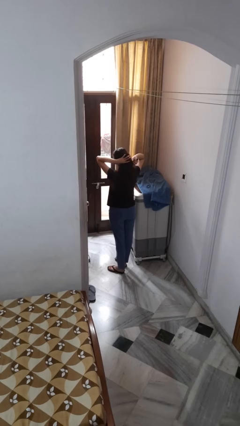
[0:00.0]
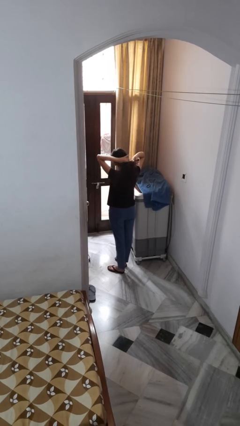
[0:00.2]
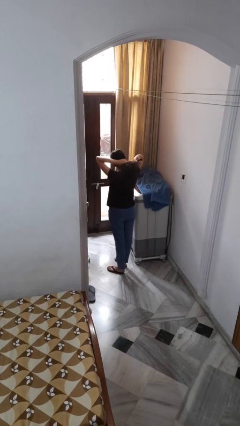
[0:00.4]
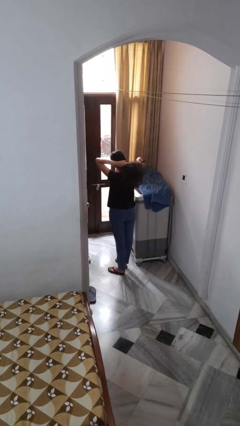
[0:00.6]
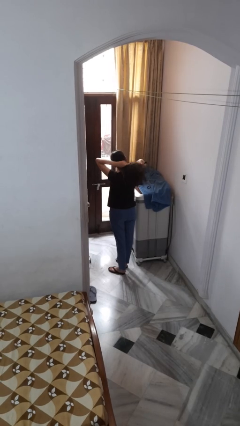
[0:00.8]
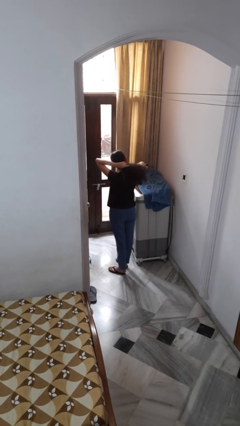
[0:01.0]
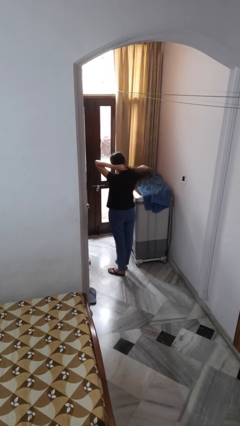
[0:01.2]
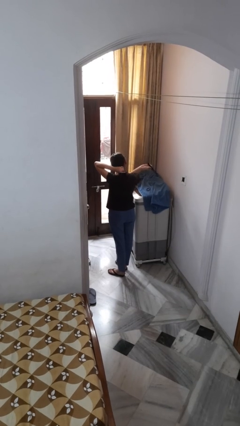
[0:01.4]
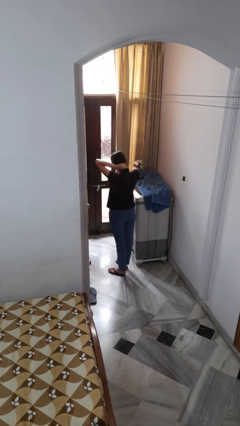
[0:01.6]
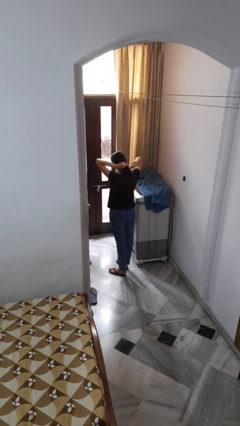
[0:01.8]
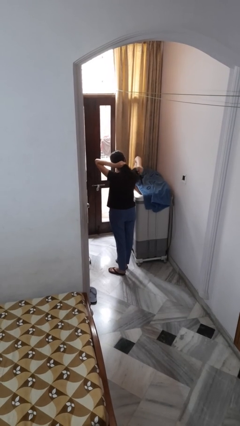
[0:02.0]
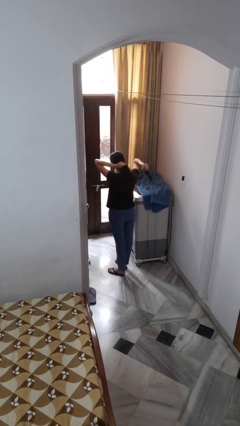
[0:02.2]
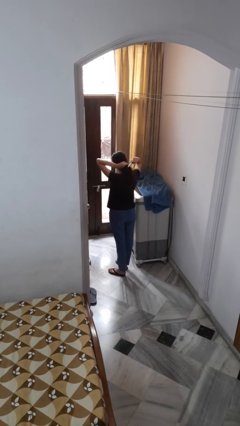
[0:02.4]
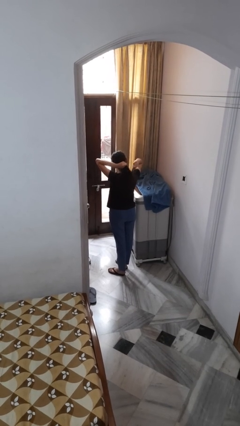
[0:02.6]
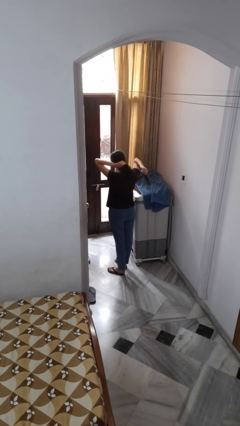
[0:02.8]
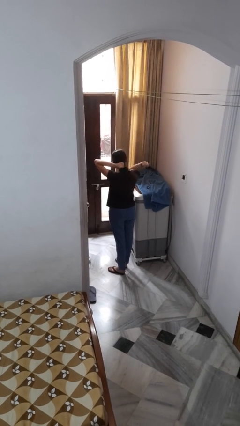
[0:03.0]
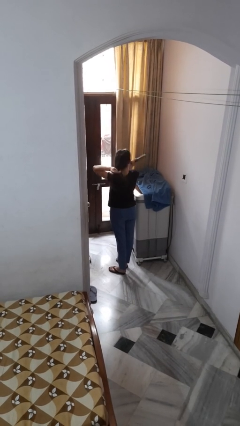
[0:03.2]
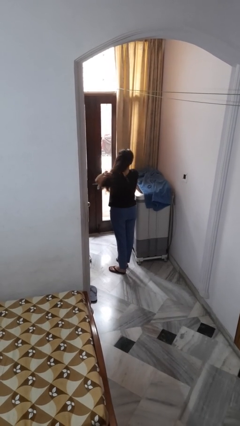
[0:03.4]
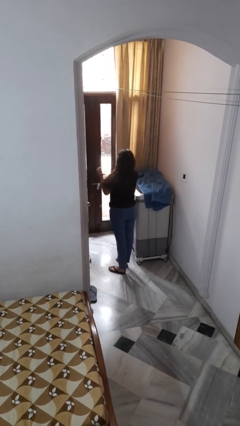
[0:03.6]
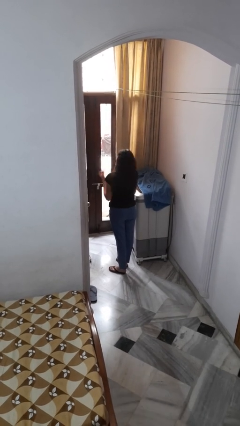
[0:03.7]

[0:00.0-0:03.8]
person brushes hair

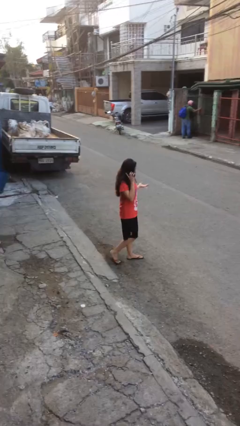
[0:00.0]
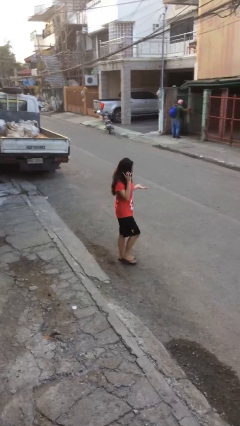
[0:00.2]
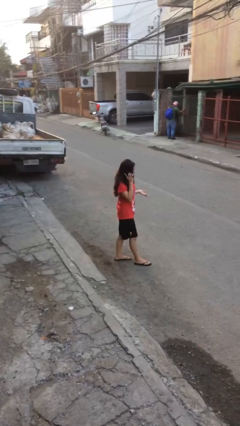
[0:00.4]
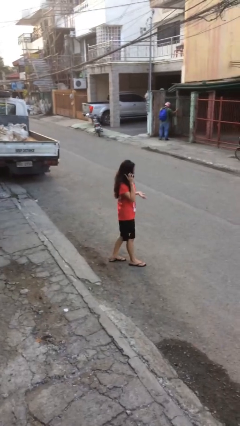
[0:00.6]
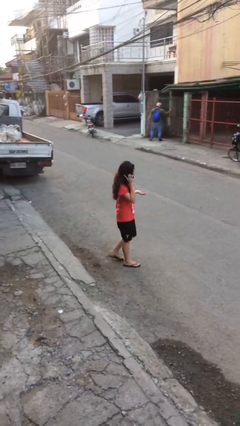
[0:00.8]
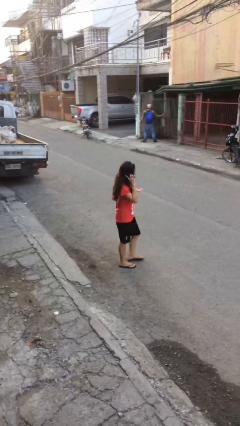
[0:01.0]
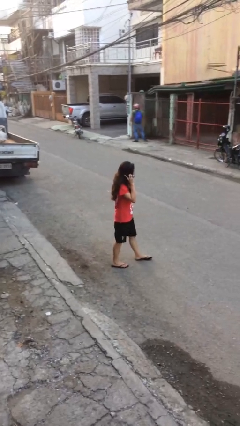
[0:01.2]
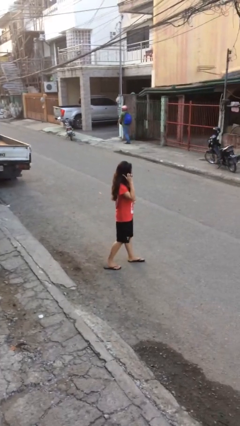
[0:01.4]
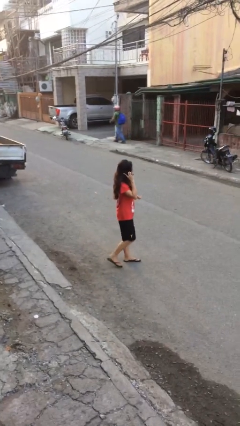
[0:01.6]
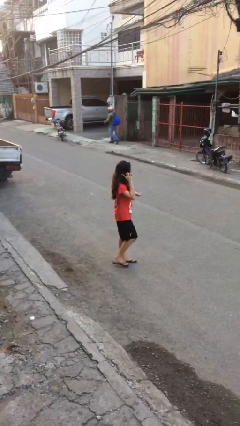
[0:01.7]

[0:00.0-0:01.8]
person talks on phone

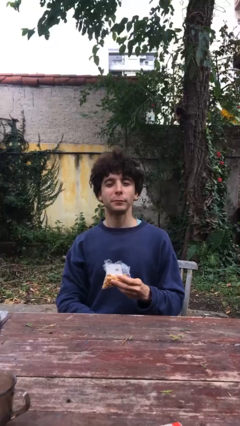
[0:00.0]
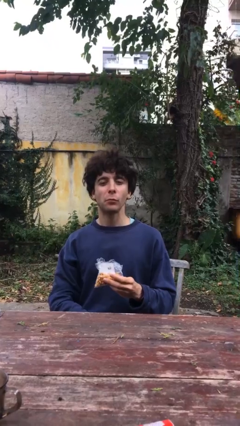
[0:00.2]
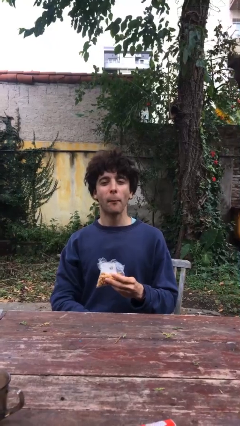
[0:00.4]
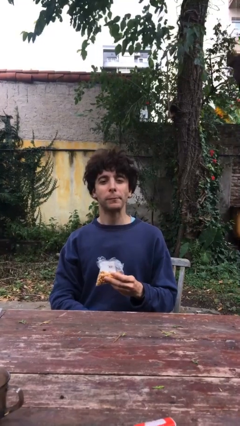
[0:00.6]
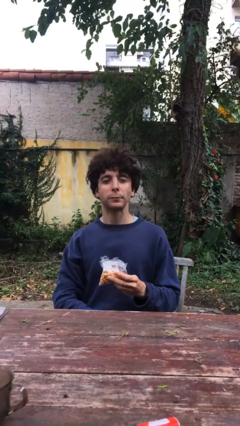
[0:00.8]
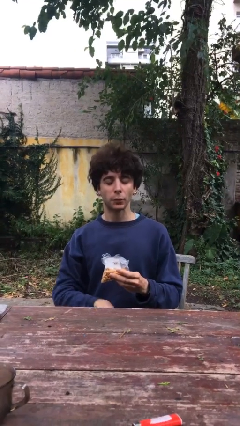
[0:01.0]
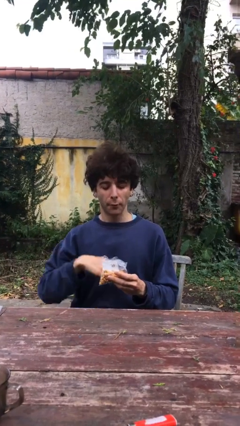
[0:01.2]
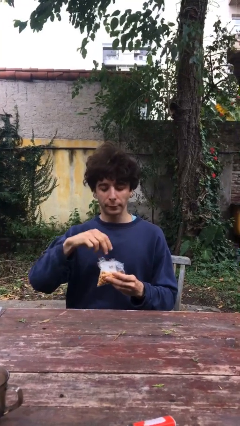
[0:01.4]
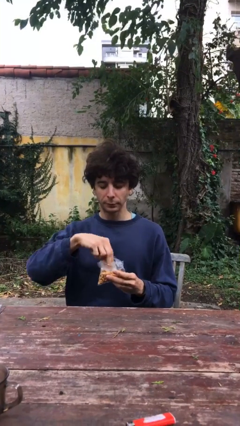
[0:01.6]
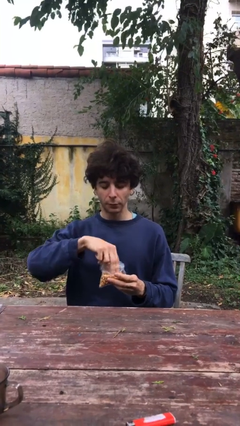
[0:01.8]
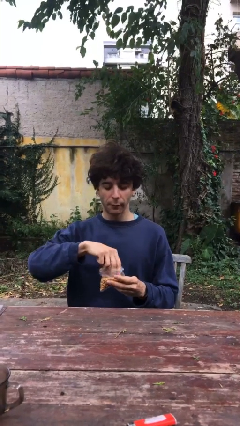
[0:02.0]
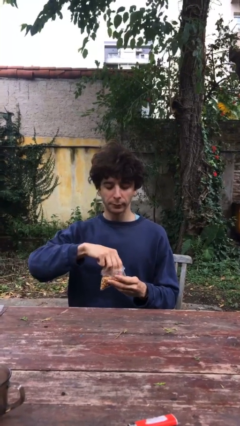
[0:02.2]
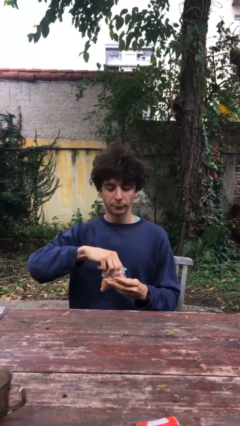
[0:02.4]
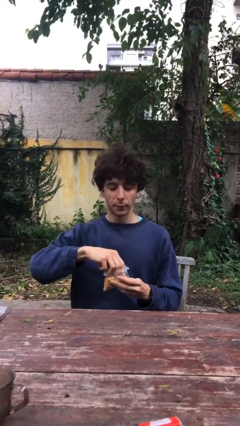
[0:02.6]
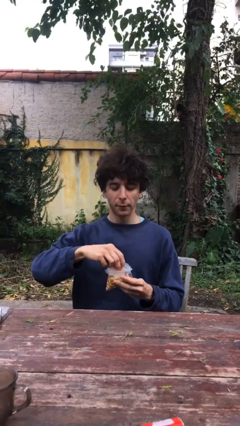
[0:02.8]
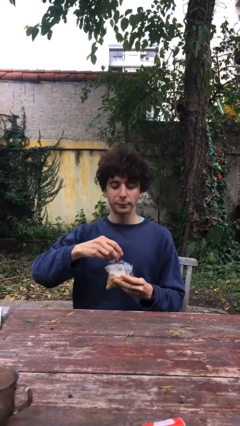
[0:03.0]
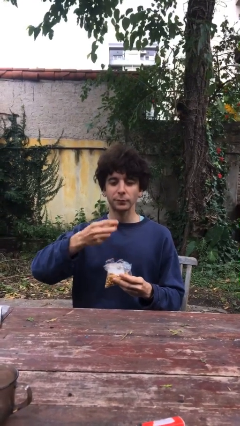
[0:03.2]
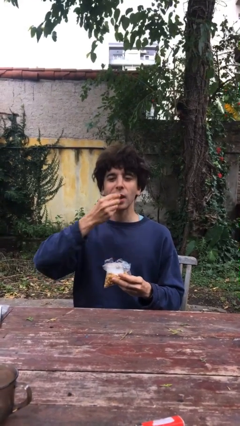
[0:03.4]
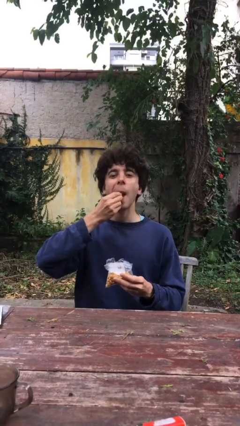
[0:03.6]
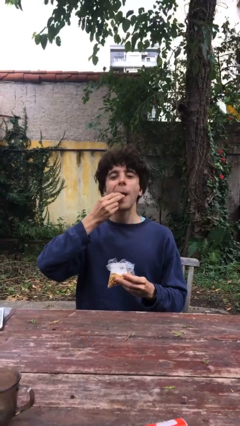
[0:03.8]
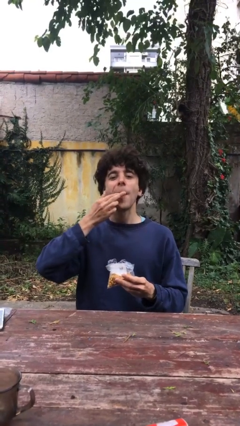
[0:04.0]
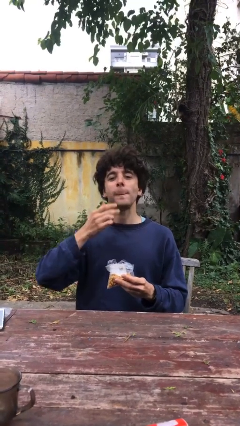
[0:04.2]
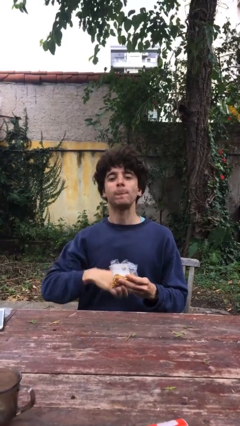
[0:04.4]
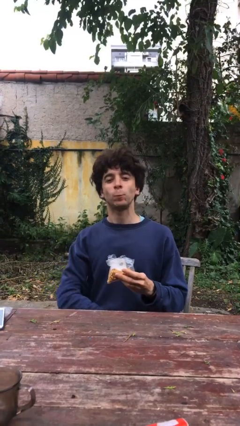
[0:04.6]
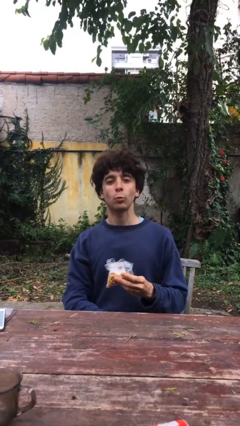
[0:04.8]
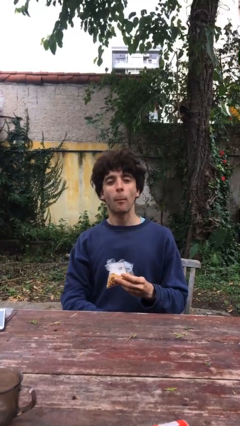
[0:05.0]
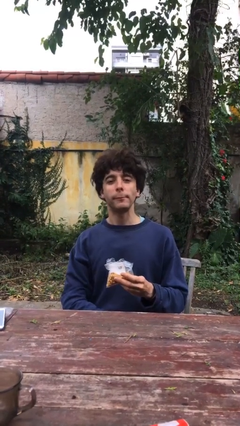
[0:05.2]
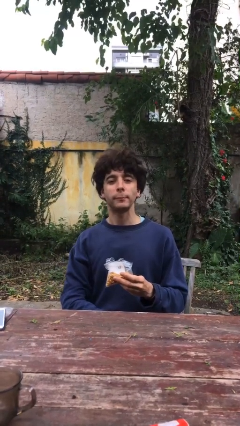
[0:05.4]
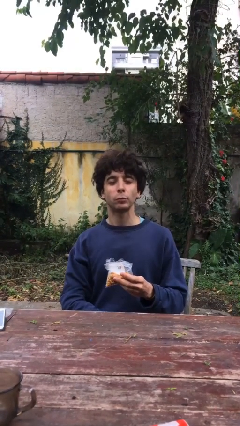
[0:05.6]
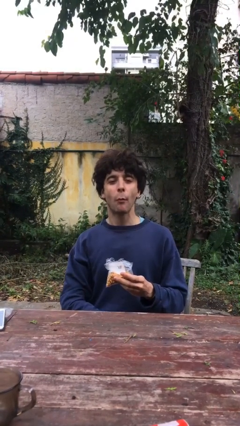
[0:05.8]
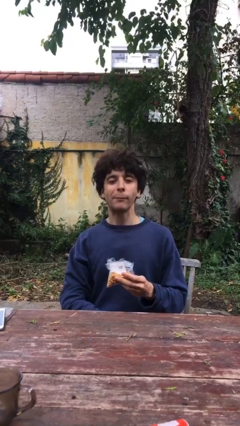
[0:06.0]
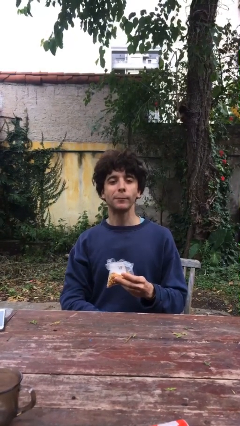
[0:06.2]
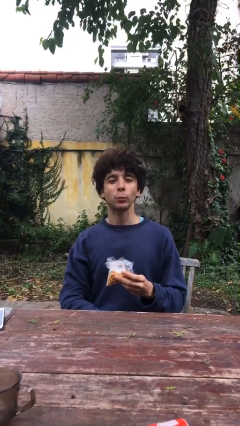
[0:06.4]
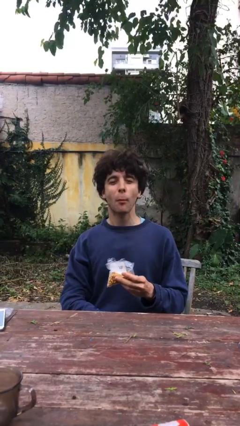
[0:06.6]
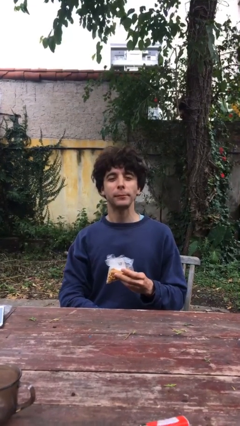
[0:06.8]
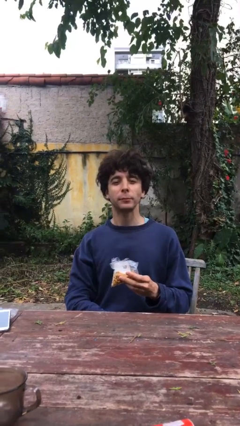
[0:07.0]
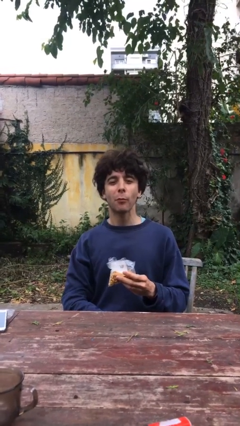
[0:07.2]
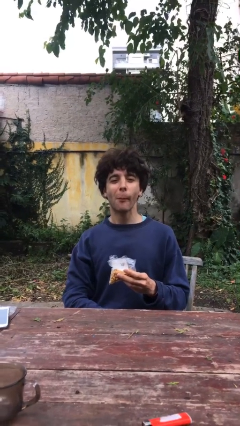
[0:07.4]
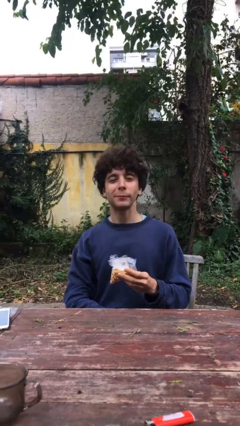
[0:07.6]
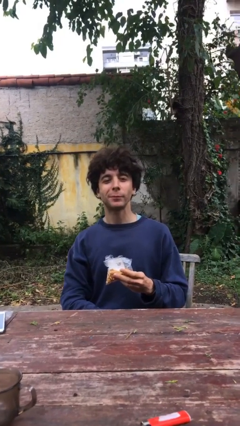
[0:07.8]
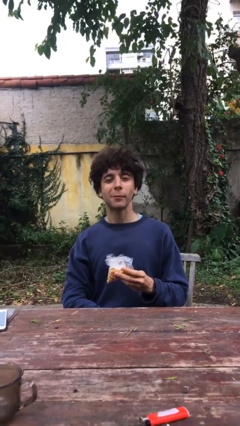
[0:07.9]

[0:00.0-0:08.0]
person eats snack from bag

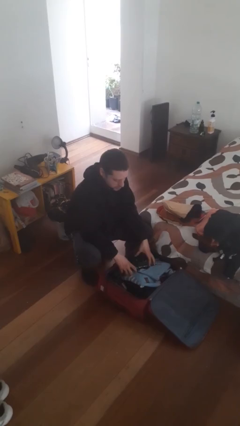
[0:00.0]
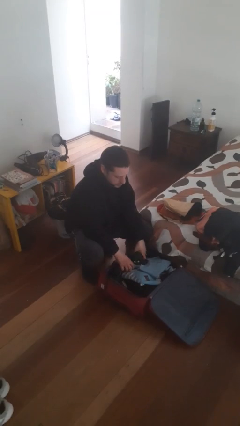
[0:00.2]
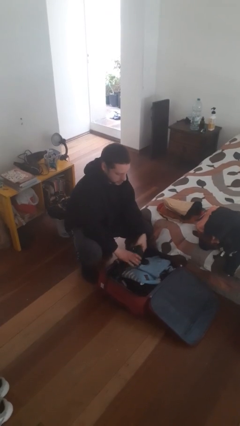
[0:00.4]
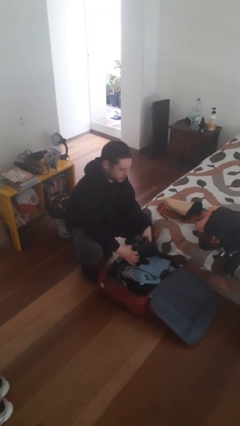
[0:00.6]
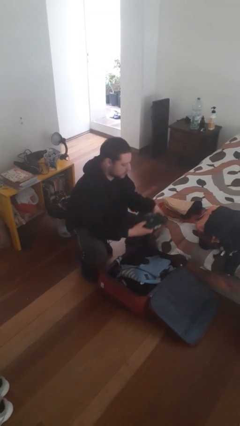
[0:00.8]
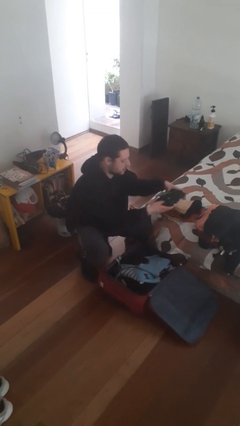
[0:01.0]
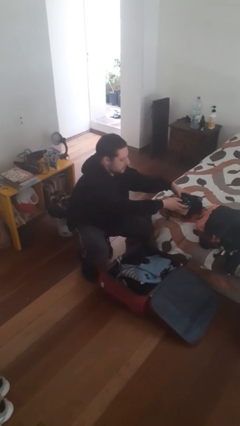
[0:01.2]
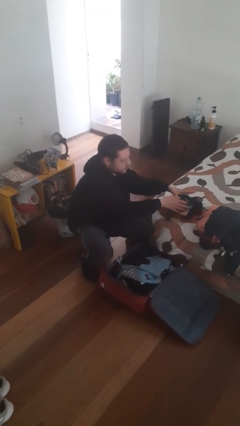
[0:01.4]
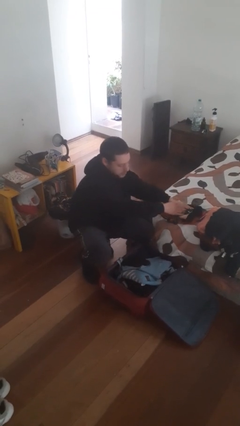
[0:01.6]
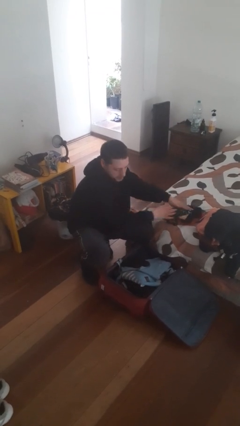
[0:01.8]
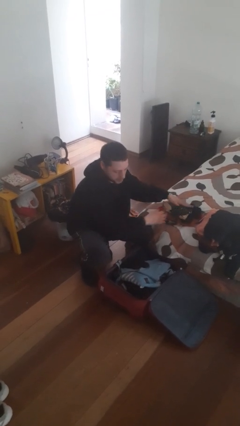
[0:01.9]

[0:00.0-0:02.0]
person unloads clothes from suitcase

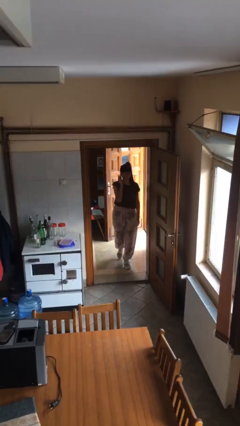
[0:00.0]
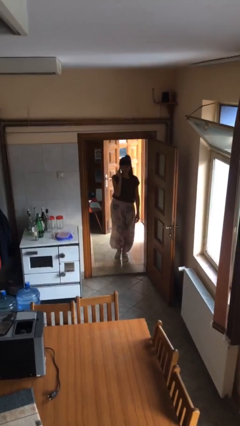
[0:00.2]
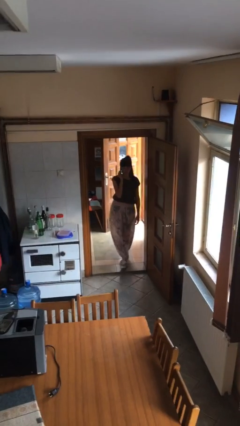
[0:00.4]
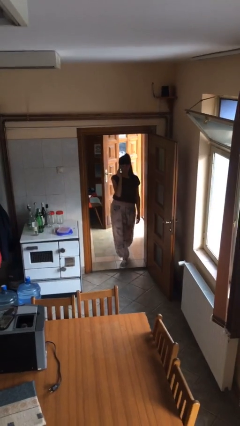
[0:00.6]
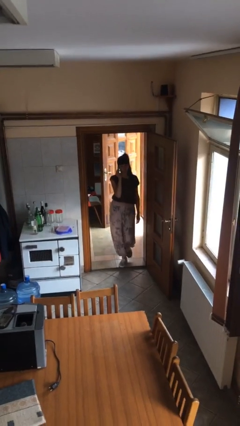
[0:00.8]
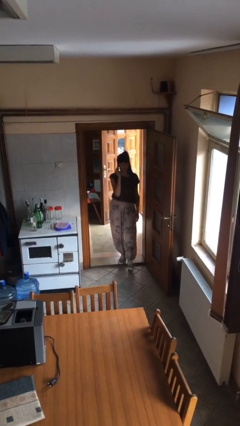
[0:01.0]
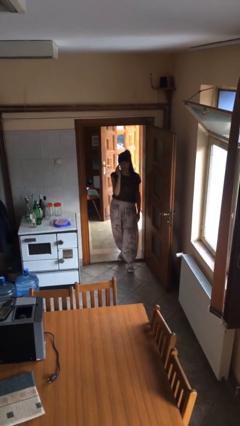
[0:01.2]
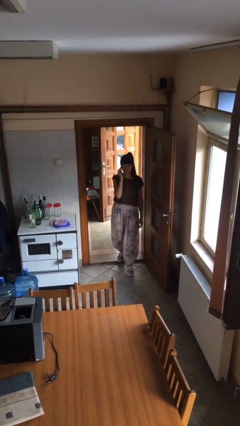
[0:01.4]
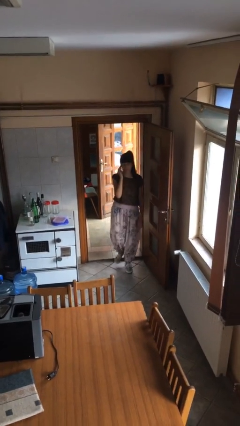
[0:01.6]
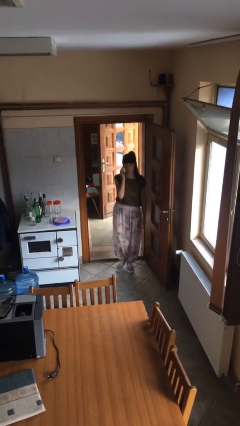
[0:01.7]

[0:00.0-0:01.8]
person enters scene through structure

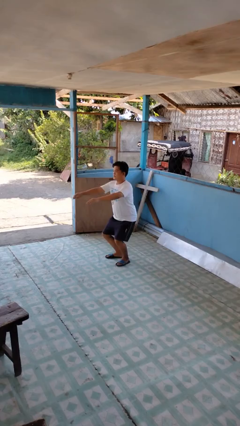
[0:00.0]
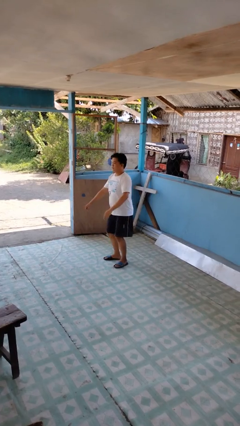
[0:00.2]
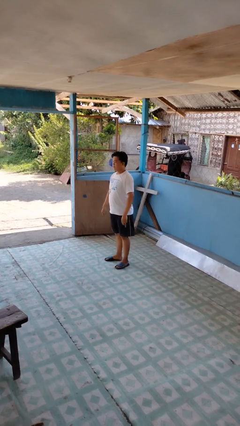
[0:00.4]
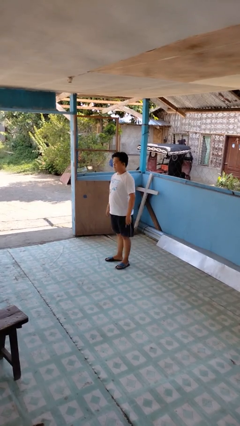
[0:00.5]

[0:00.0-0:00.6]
person stands up
